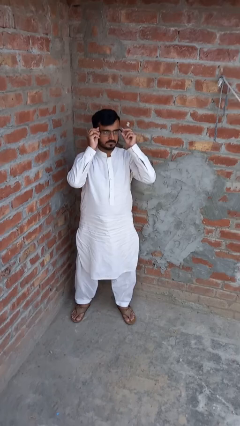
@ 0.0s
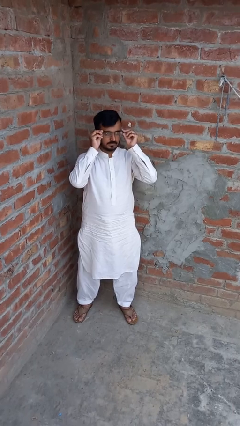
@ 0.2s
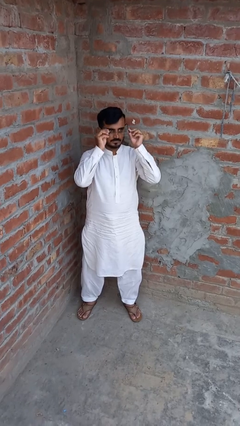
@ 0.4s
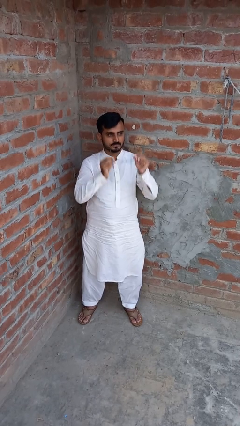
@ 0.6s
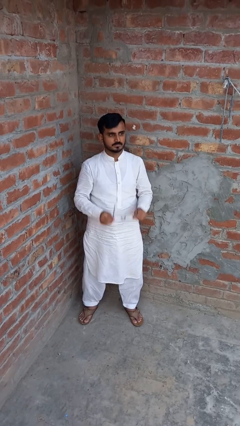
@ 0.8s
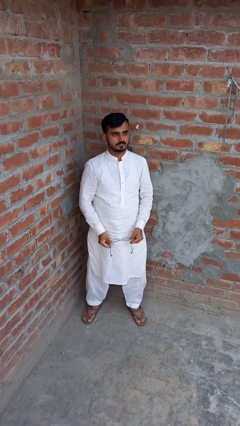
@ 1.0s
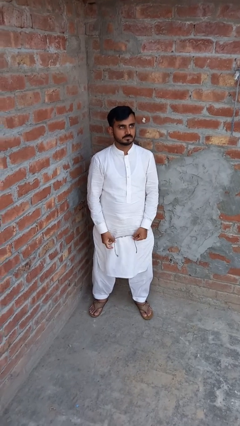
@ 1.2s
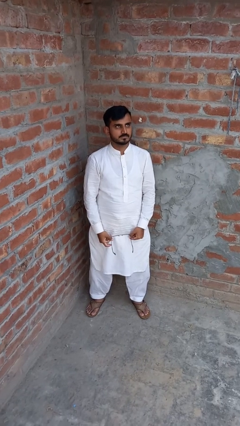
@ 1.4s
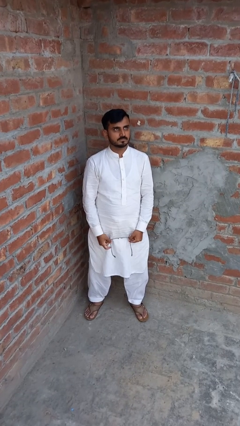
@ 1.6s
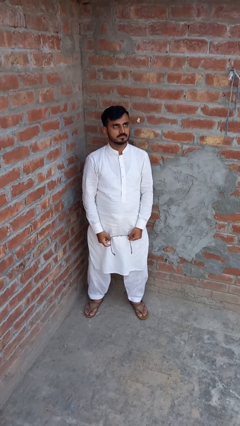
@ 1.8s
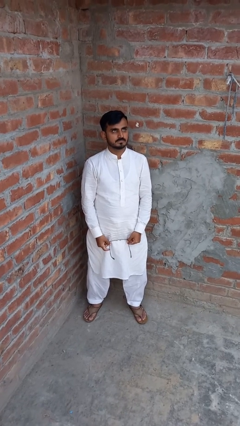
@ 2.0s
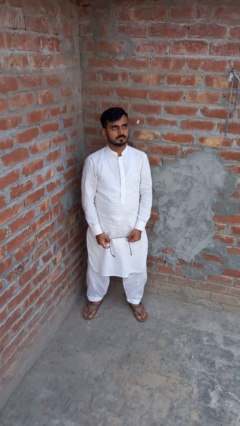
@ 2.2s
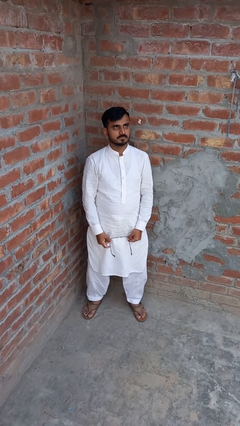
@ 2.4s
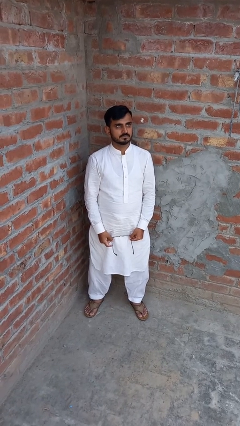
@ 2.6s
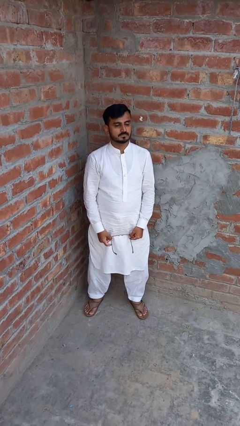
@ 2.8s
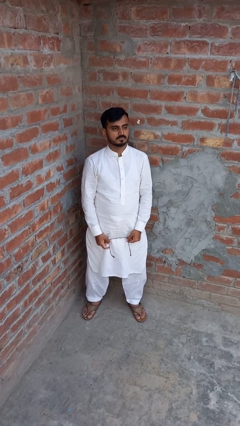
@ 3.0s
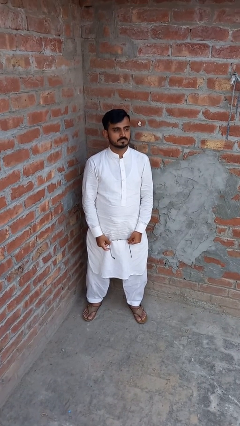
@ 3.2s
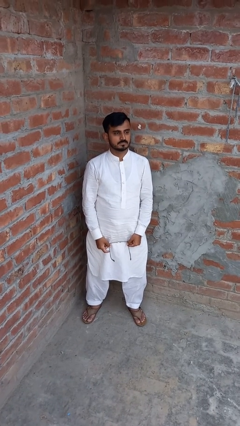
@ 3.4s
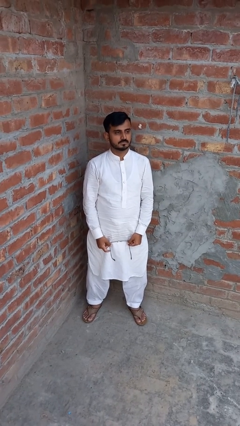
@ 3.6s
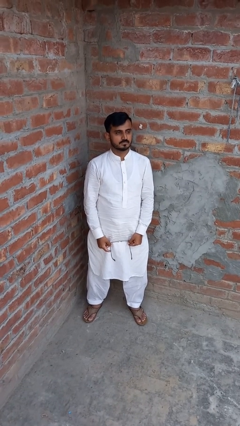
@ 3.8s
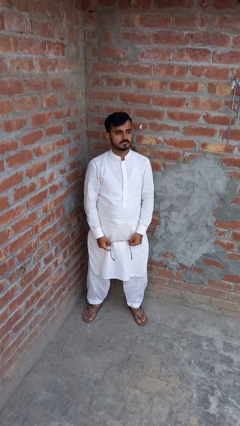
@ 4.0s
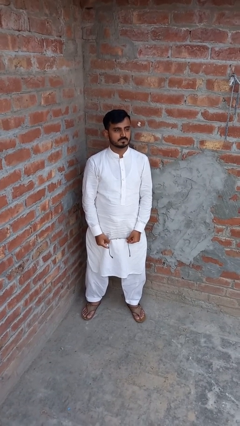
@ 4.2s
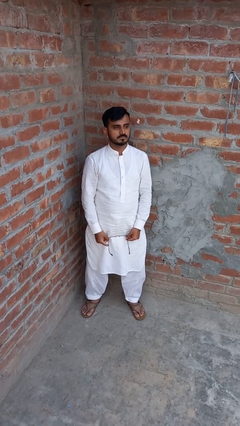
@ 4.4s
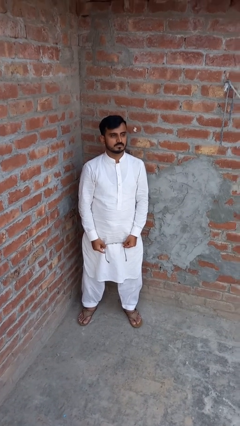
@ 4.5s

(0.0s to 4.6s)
person takes off glasses

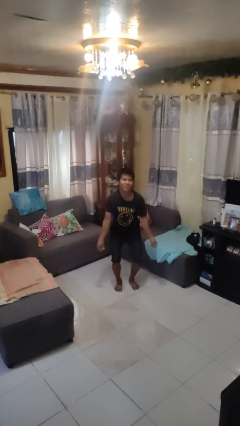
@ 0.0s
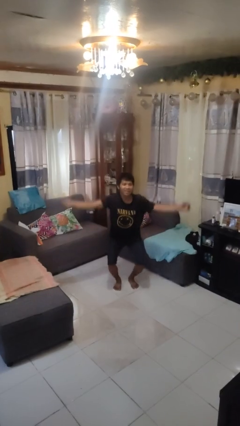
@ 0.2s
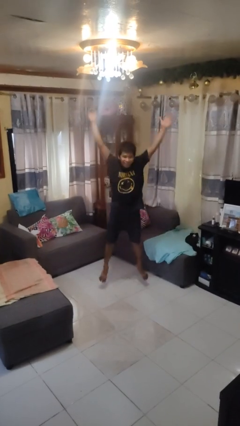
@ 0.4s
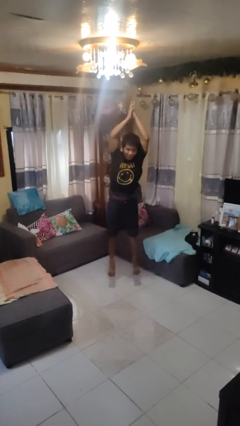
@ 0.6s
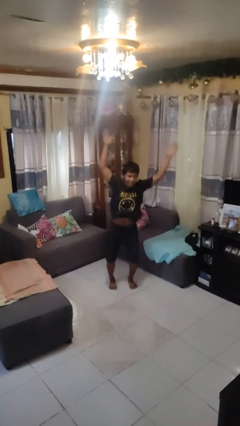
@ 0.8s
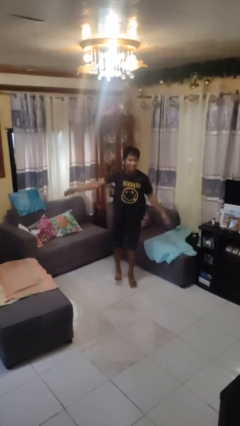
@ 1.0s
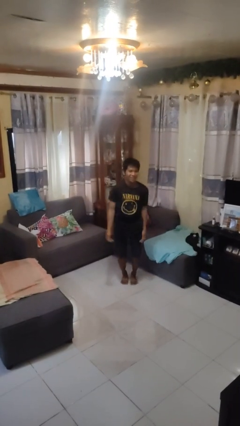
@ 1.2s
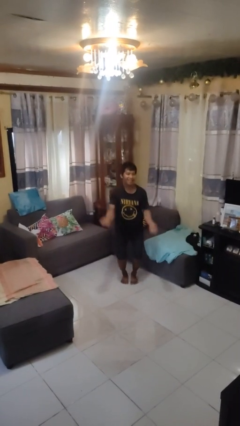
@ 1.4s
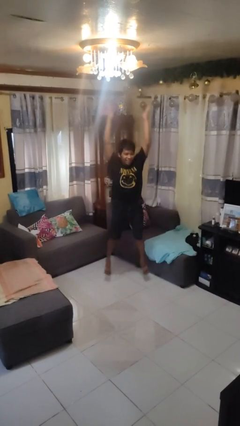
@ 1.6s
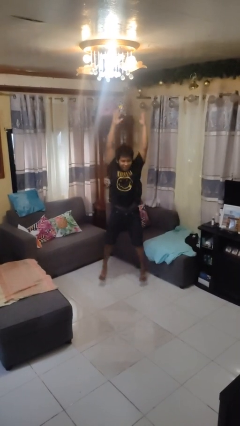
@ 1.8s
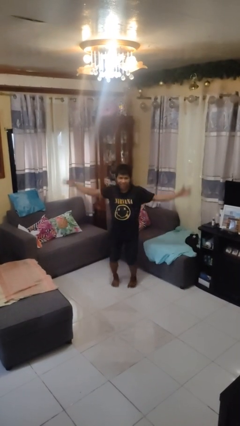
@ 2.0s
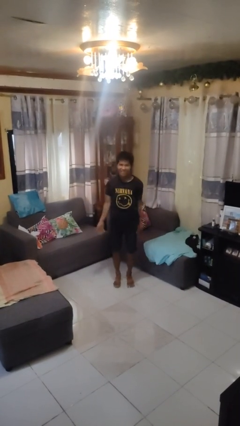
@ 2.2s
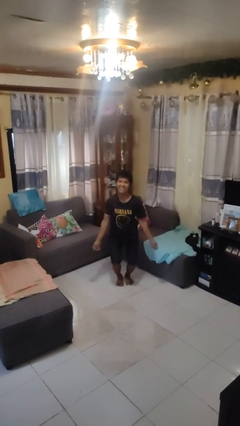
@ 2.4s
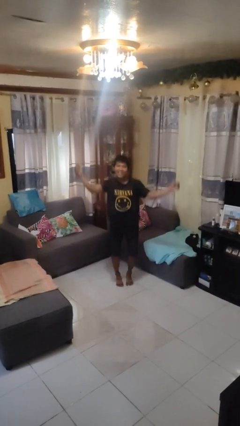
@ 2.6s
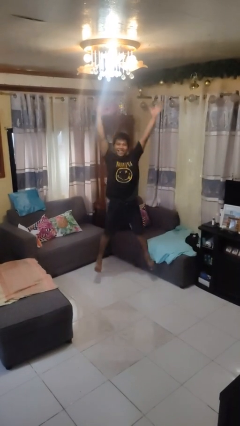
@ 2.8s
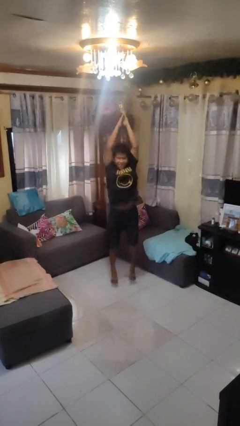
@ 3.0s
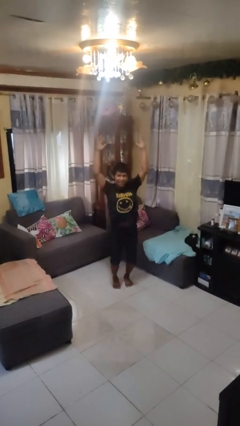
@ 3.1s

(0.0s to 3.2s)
person exercises with jumping jacks

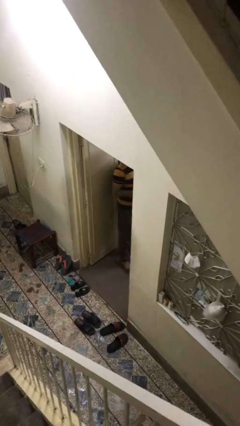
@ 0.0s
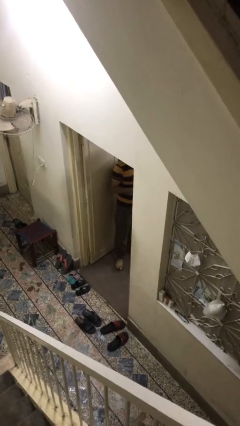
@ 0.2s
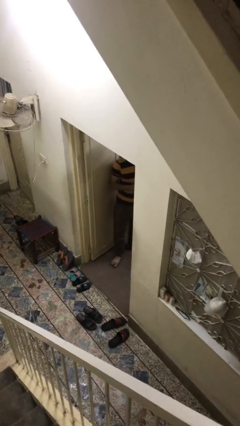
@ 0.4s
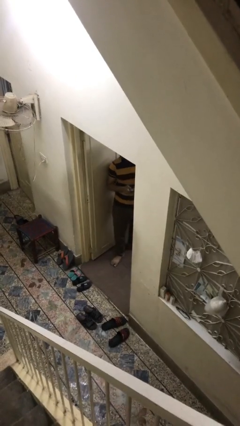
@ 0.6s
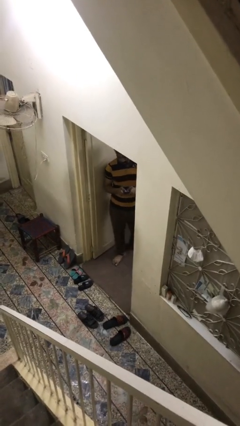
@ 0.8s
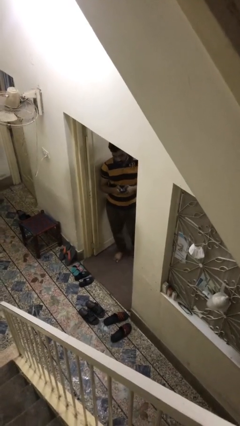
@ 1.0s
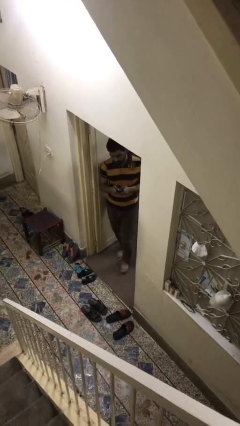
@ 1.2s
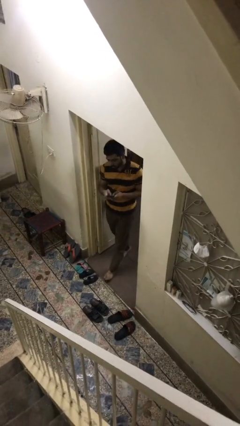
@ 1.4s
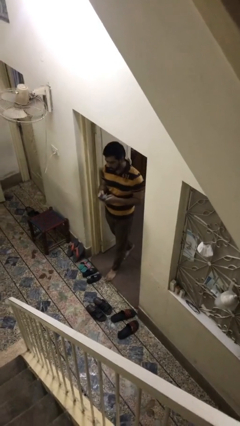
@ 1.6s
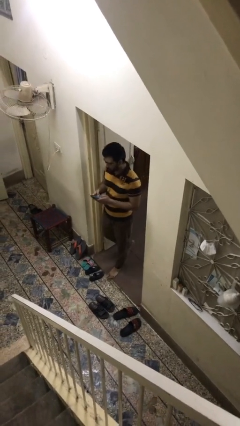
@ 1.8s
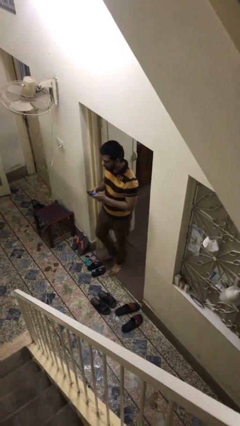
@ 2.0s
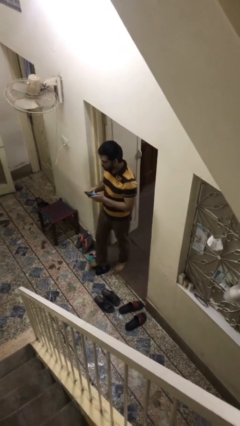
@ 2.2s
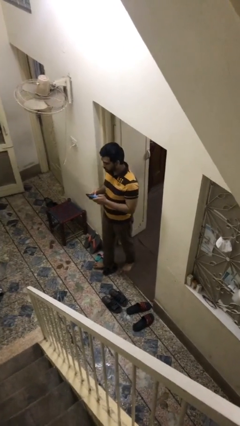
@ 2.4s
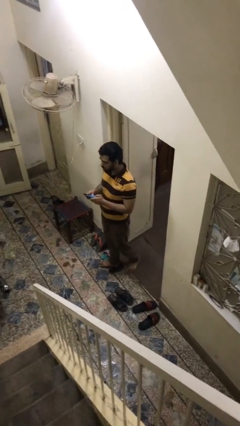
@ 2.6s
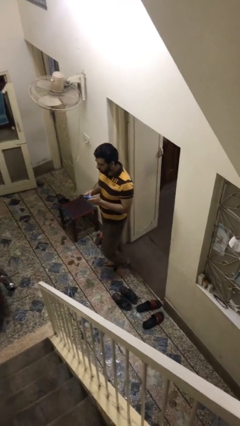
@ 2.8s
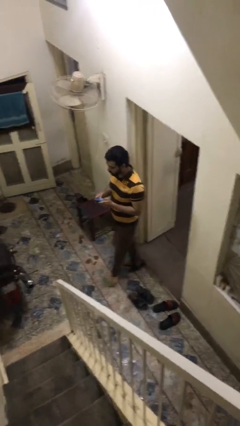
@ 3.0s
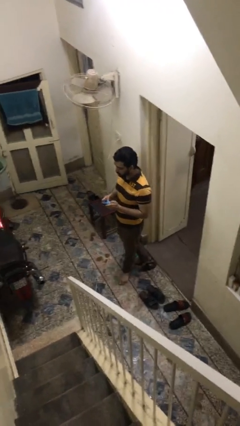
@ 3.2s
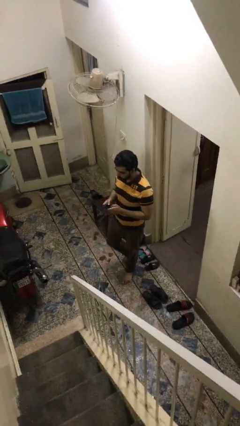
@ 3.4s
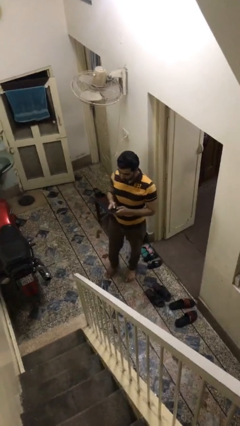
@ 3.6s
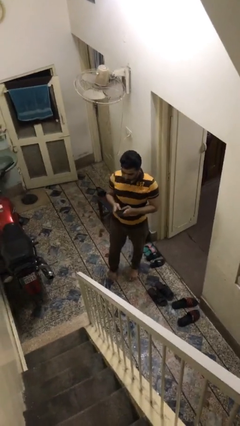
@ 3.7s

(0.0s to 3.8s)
person enters scene through structure

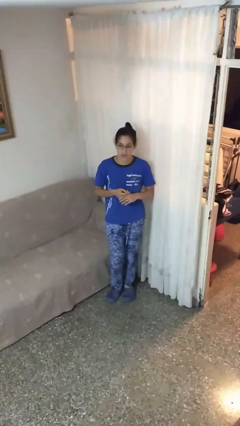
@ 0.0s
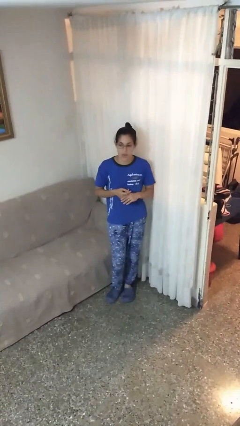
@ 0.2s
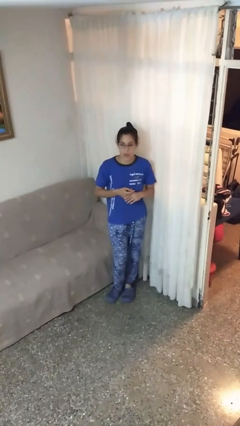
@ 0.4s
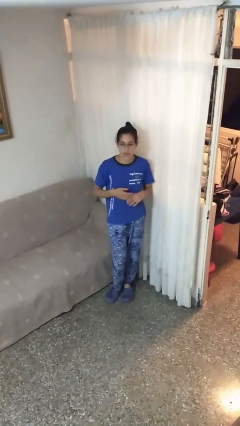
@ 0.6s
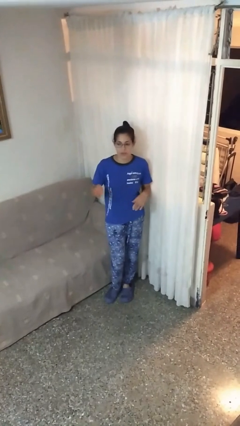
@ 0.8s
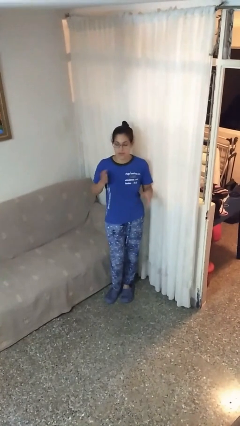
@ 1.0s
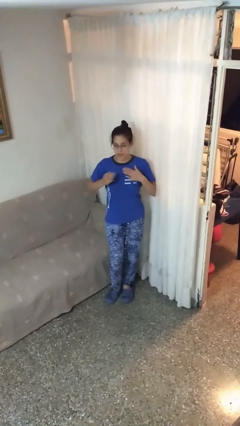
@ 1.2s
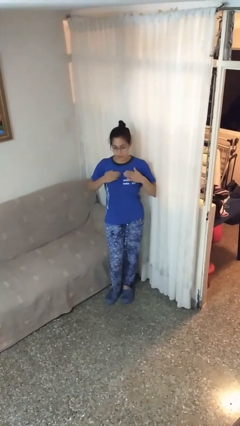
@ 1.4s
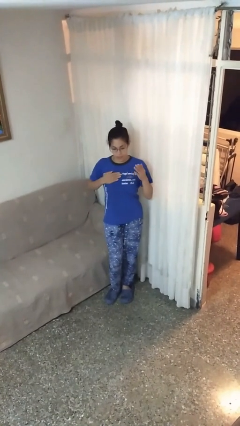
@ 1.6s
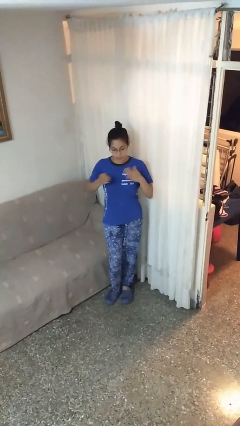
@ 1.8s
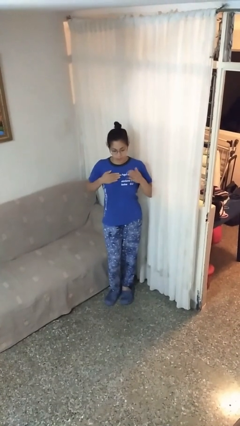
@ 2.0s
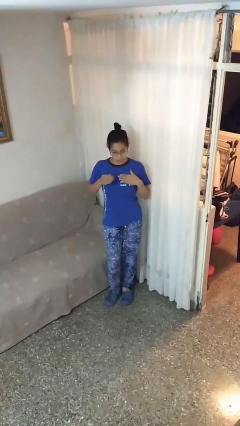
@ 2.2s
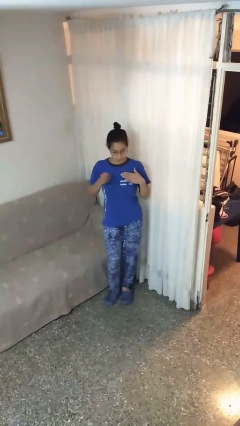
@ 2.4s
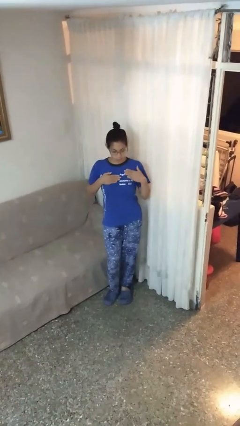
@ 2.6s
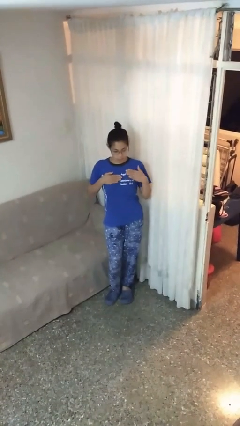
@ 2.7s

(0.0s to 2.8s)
person drums on chest

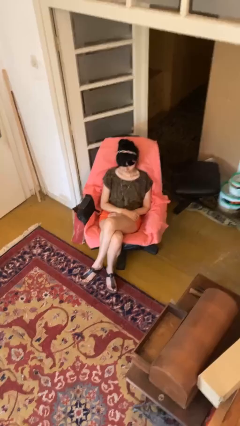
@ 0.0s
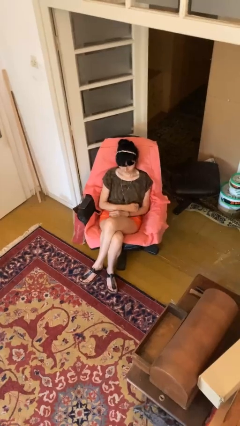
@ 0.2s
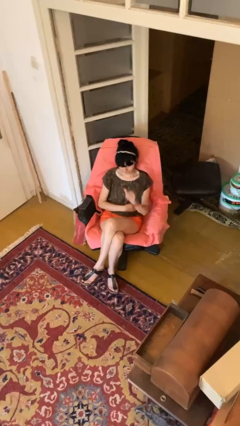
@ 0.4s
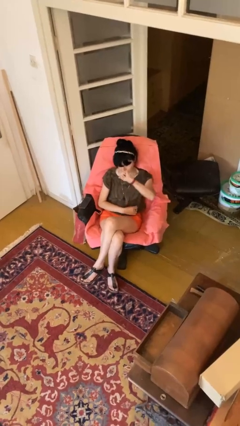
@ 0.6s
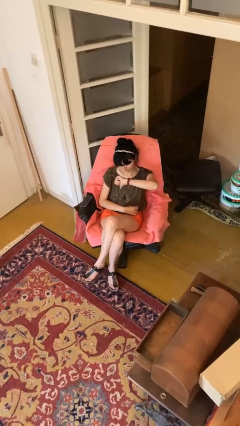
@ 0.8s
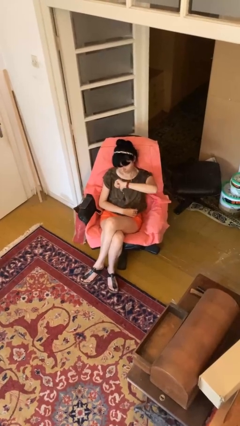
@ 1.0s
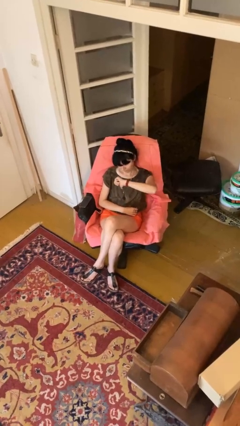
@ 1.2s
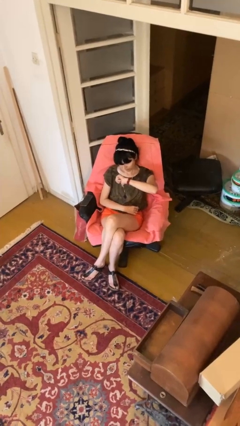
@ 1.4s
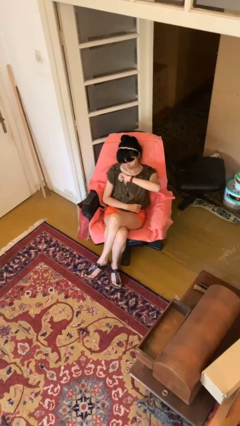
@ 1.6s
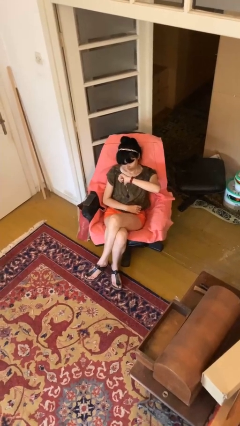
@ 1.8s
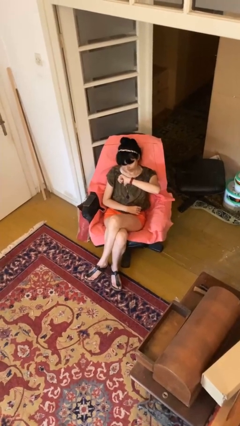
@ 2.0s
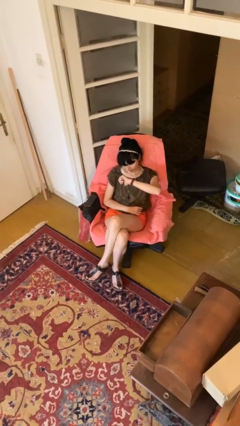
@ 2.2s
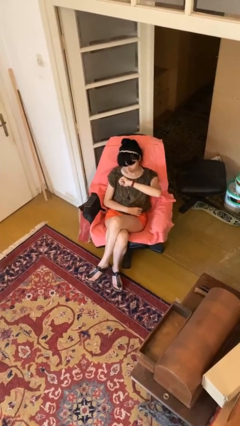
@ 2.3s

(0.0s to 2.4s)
person gestures thumbs down

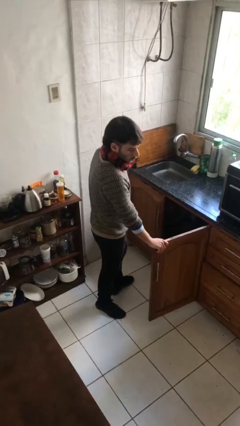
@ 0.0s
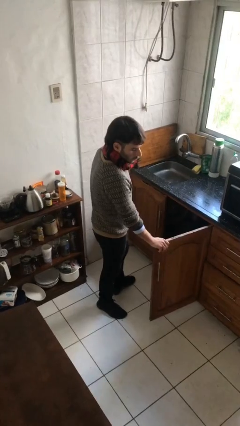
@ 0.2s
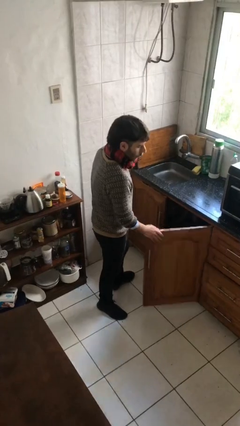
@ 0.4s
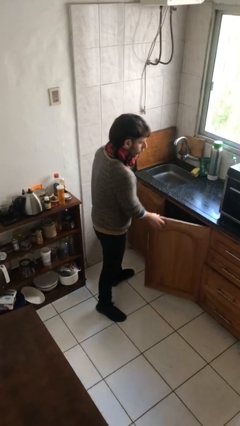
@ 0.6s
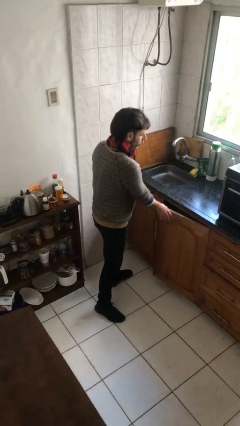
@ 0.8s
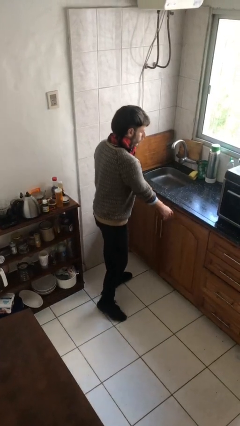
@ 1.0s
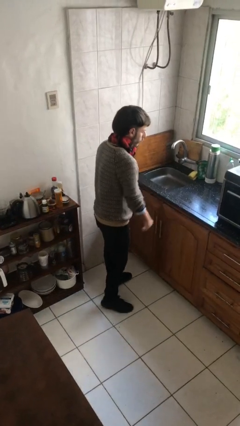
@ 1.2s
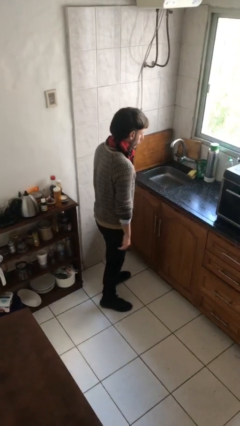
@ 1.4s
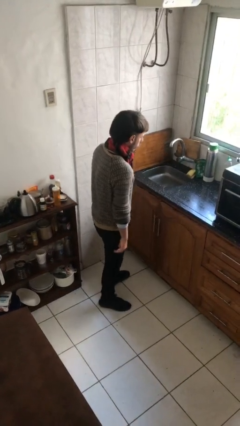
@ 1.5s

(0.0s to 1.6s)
person closes cabinet
